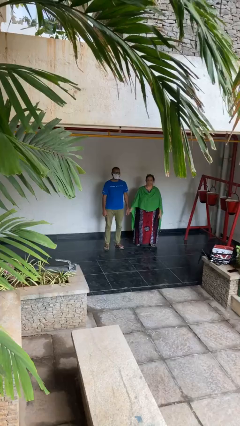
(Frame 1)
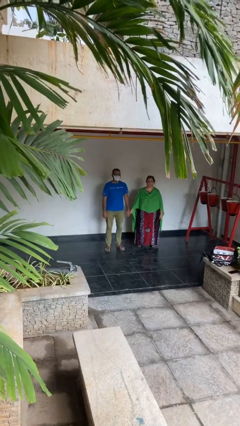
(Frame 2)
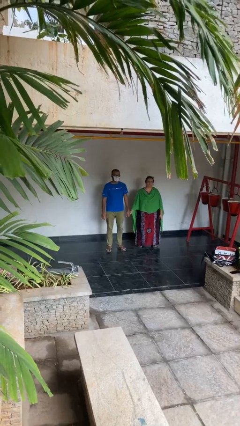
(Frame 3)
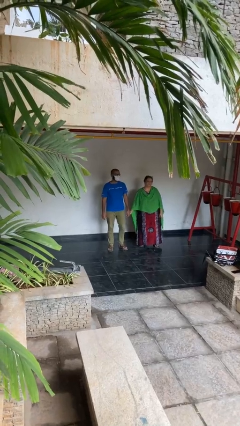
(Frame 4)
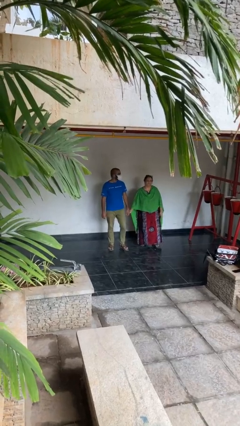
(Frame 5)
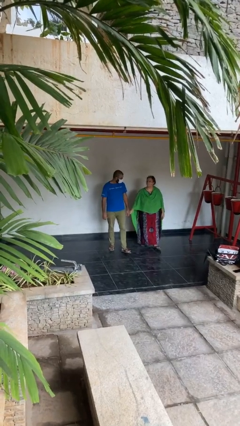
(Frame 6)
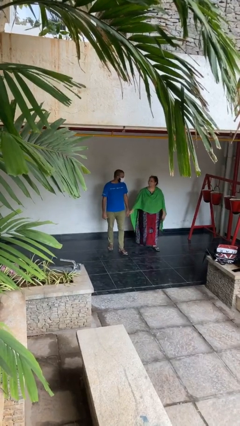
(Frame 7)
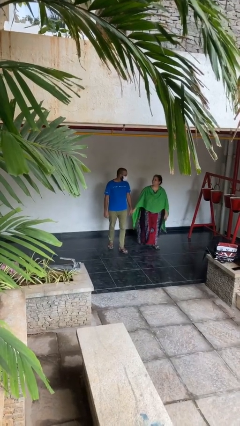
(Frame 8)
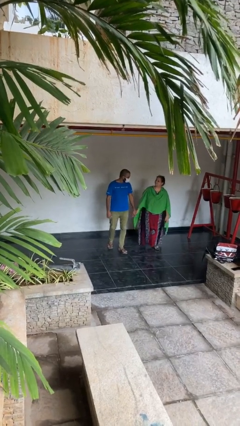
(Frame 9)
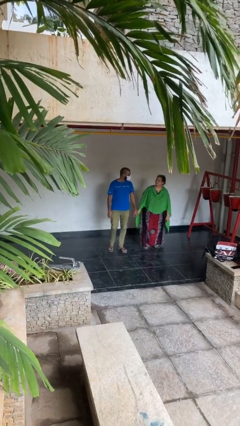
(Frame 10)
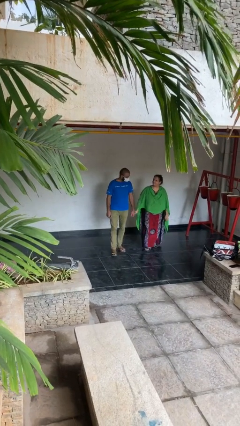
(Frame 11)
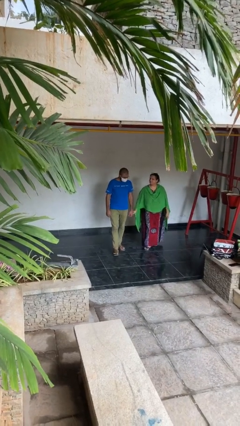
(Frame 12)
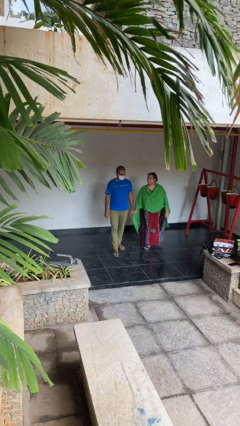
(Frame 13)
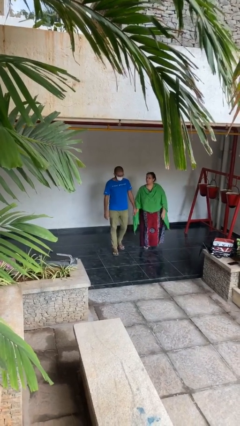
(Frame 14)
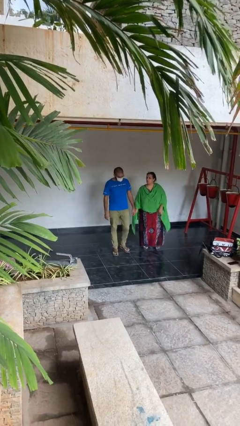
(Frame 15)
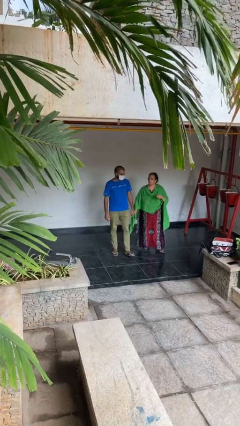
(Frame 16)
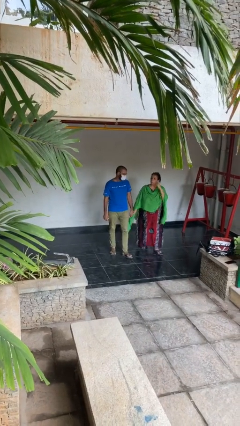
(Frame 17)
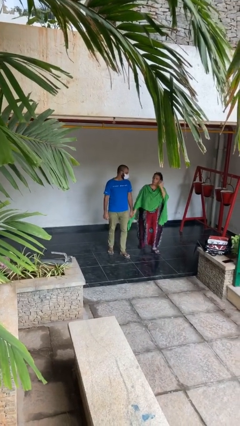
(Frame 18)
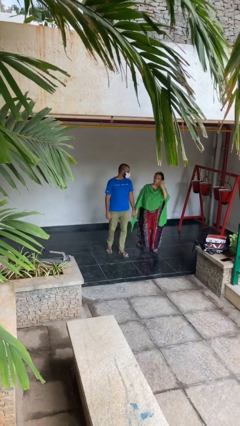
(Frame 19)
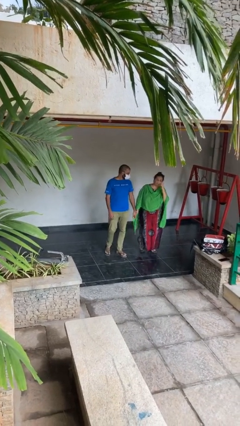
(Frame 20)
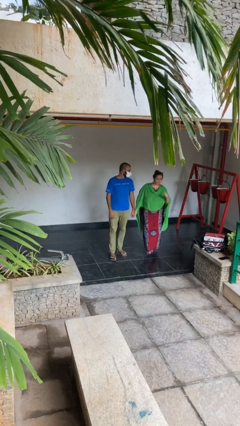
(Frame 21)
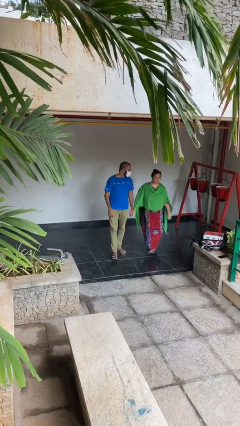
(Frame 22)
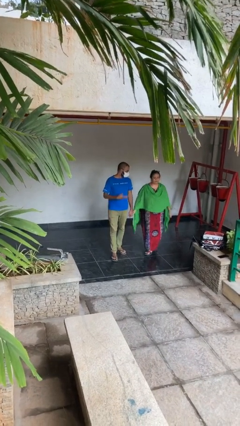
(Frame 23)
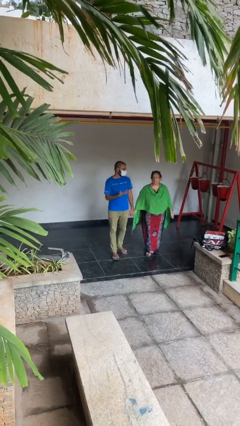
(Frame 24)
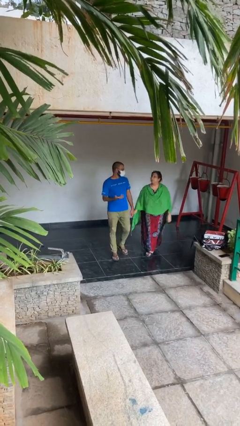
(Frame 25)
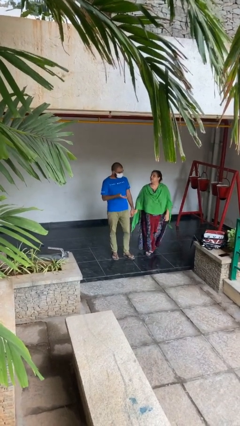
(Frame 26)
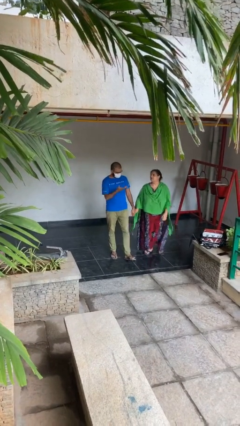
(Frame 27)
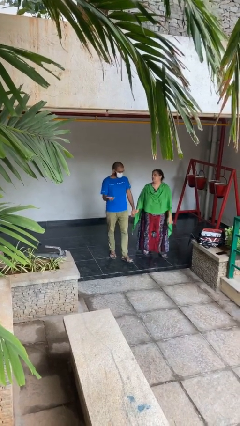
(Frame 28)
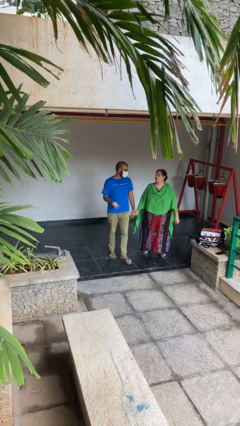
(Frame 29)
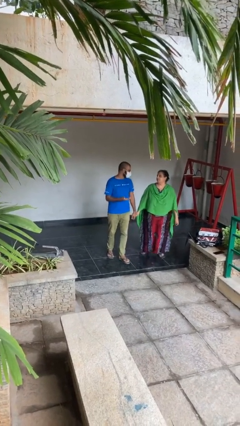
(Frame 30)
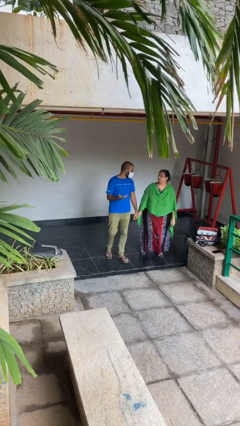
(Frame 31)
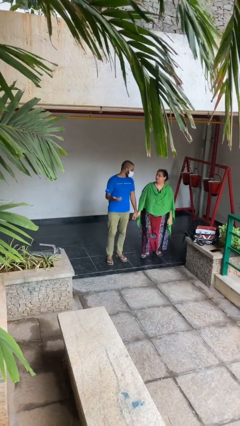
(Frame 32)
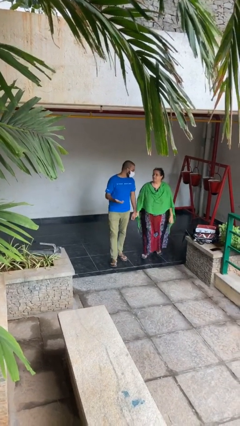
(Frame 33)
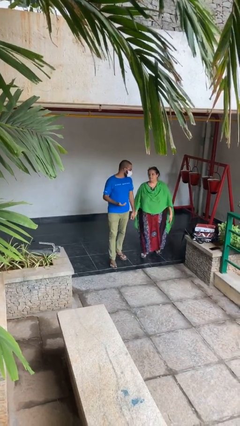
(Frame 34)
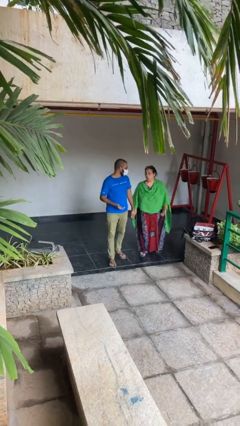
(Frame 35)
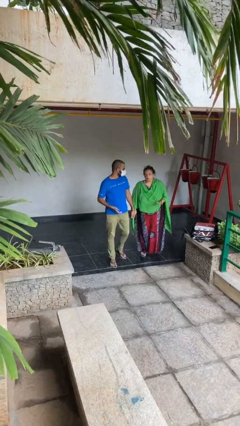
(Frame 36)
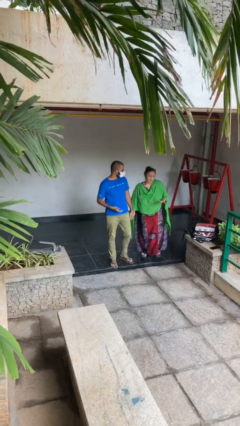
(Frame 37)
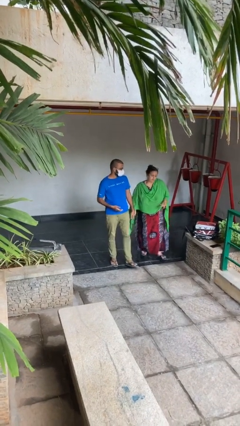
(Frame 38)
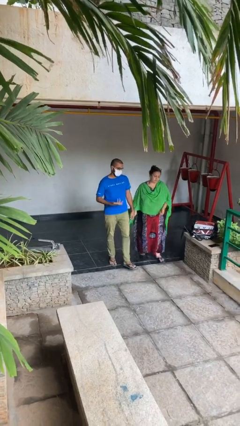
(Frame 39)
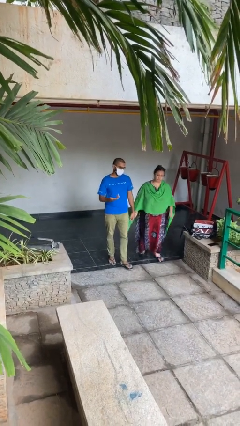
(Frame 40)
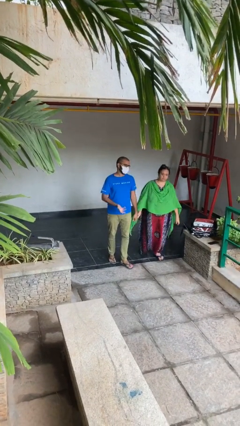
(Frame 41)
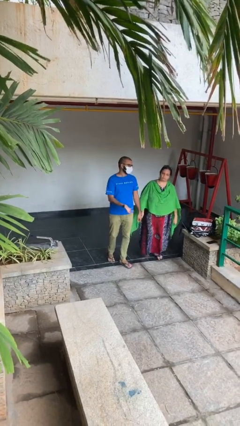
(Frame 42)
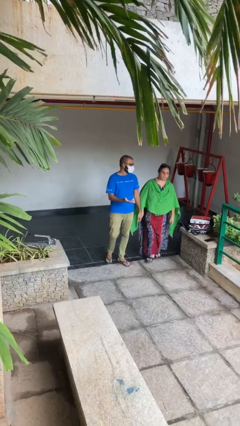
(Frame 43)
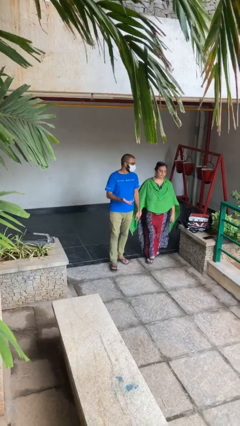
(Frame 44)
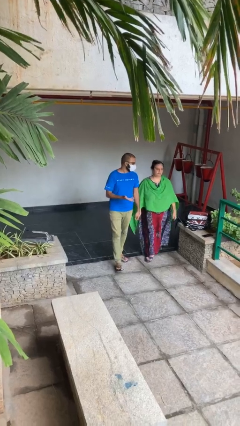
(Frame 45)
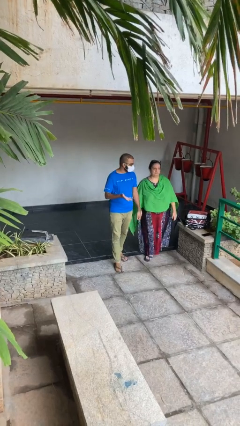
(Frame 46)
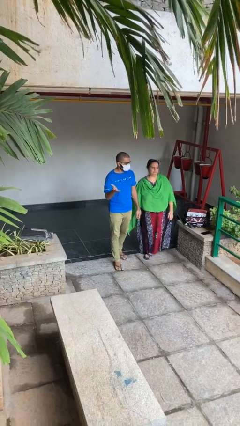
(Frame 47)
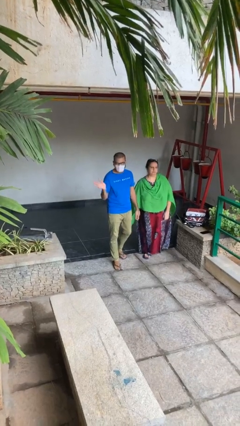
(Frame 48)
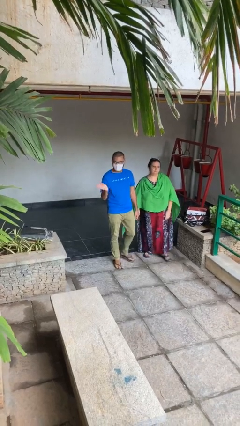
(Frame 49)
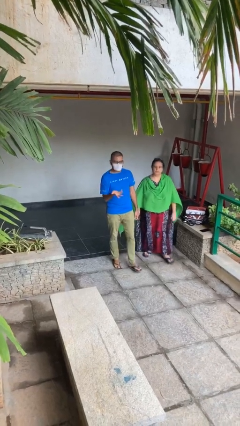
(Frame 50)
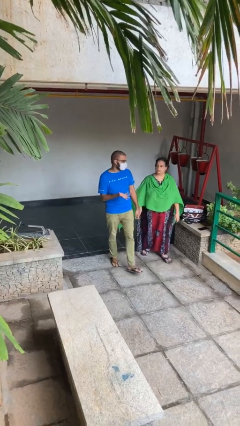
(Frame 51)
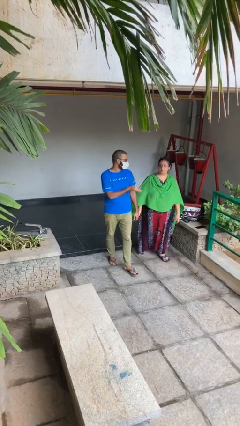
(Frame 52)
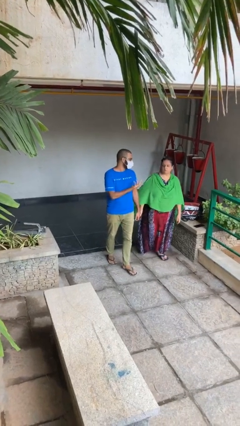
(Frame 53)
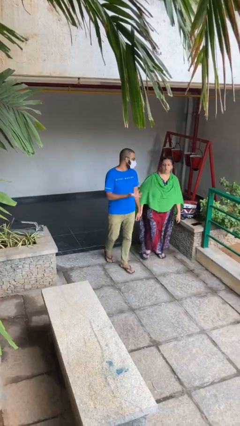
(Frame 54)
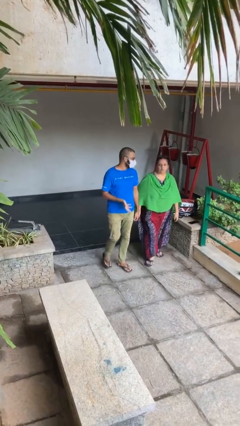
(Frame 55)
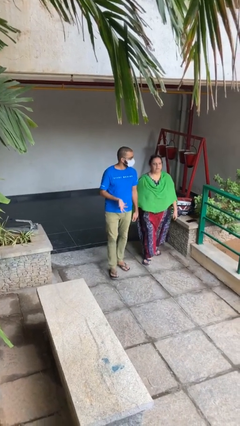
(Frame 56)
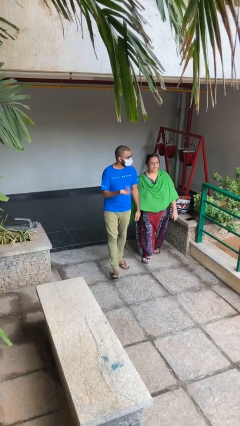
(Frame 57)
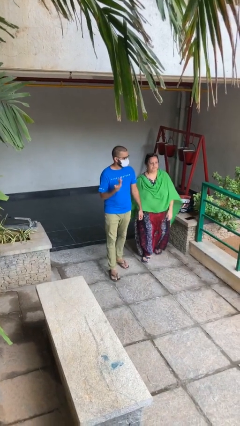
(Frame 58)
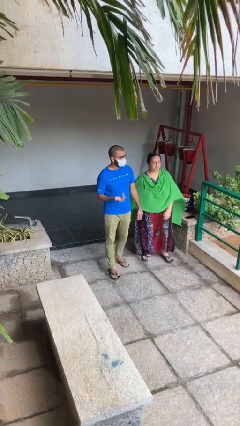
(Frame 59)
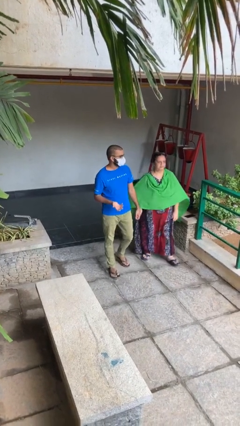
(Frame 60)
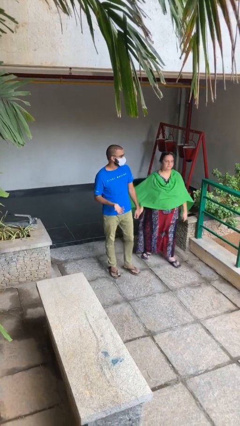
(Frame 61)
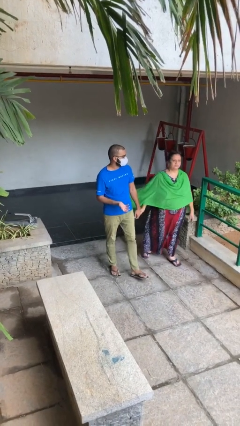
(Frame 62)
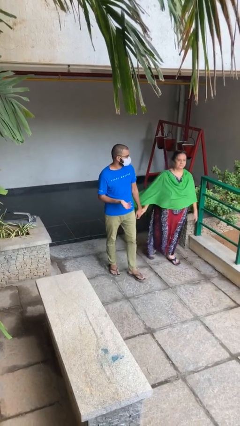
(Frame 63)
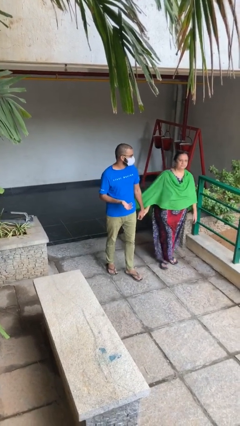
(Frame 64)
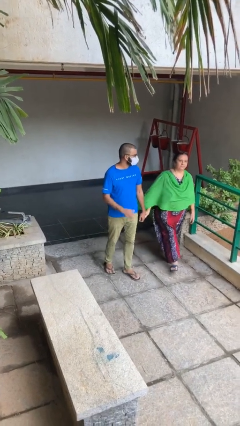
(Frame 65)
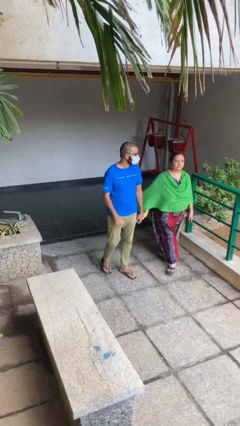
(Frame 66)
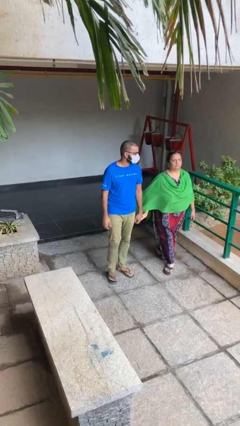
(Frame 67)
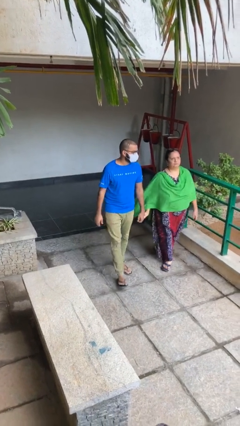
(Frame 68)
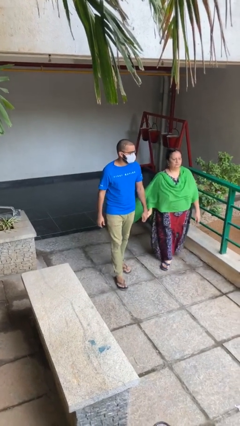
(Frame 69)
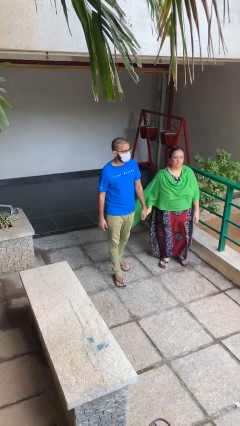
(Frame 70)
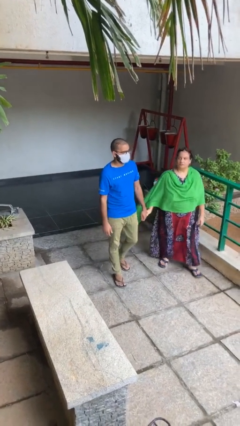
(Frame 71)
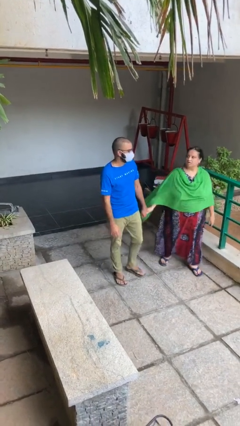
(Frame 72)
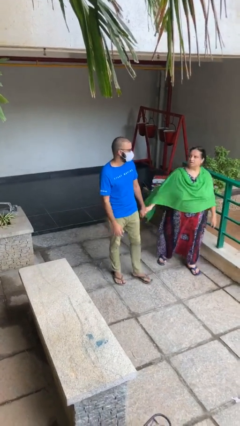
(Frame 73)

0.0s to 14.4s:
person holds hand

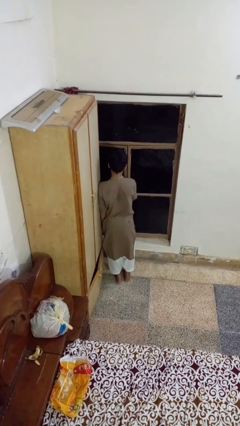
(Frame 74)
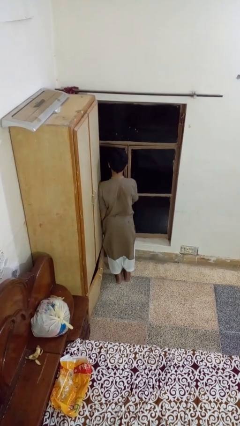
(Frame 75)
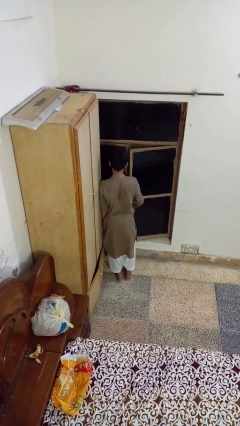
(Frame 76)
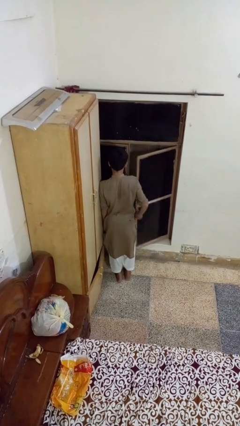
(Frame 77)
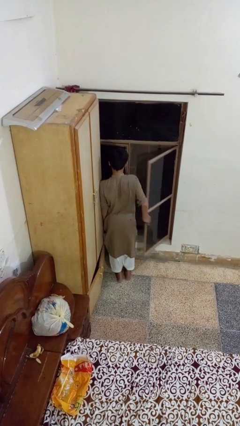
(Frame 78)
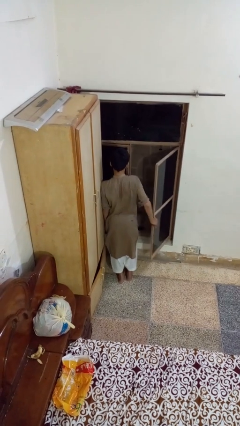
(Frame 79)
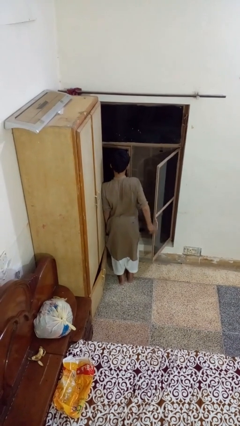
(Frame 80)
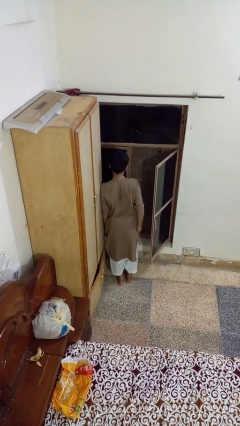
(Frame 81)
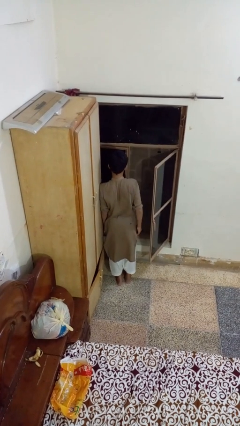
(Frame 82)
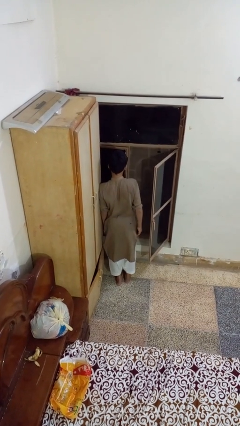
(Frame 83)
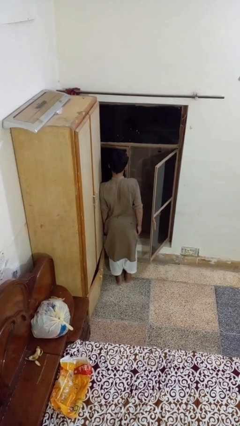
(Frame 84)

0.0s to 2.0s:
person opens home window

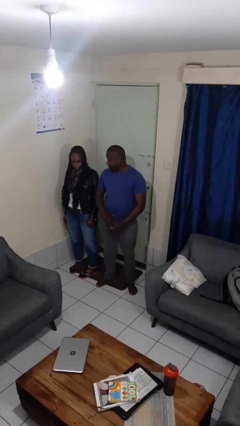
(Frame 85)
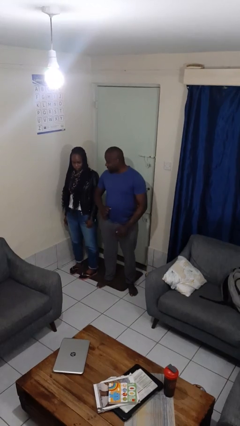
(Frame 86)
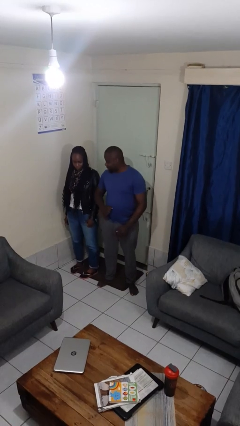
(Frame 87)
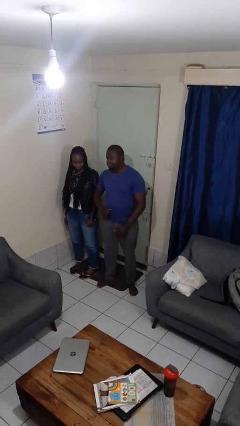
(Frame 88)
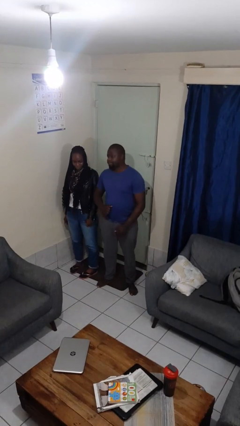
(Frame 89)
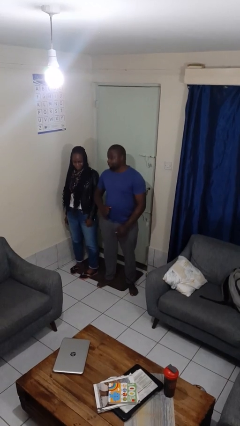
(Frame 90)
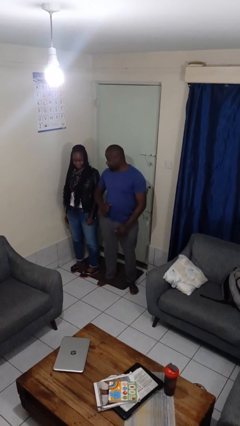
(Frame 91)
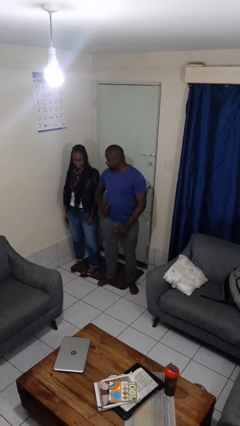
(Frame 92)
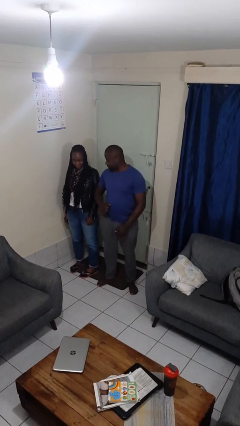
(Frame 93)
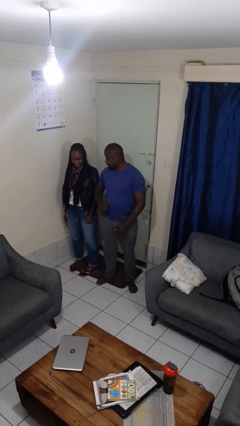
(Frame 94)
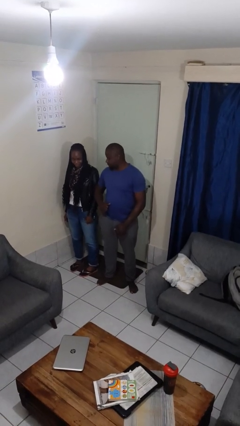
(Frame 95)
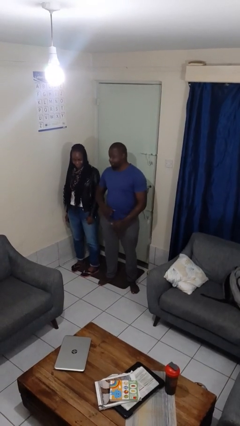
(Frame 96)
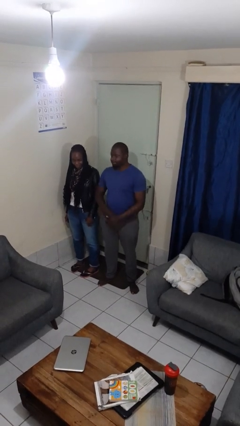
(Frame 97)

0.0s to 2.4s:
person nudges person with elbow
